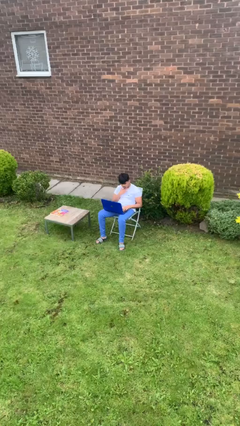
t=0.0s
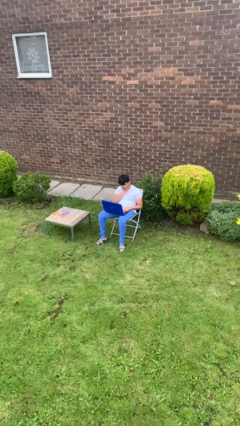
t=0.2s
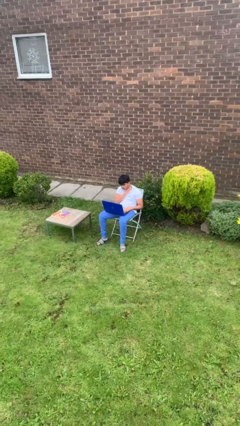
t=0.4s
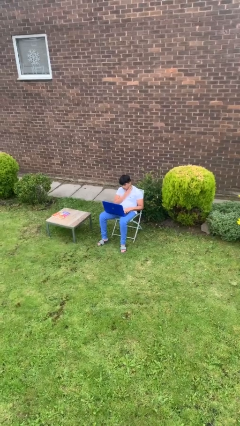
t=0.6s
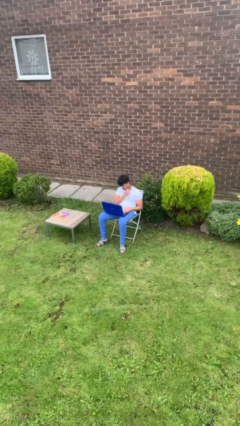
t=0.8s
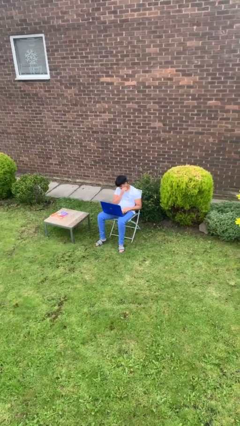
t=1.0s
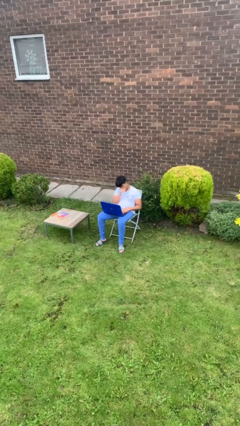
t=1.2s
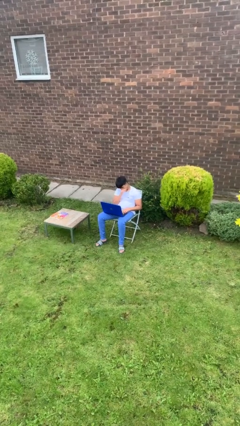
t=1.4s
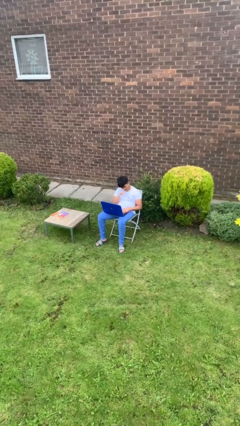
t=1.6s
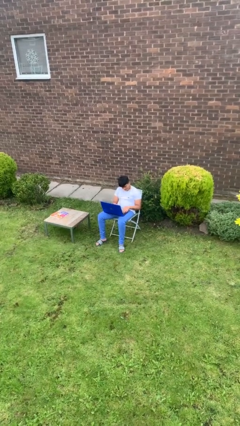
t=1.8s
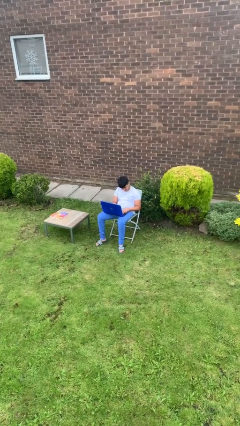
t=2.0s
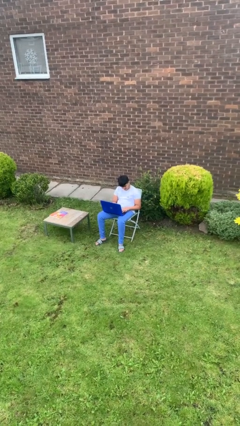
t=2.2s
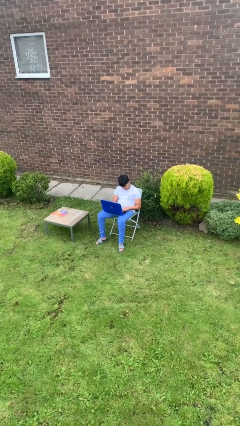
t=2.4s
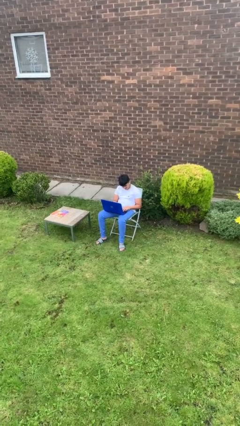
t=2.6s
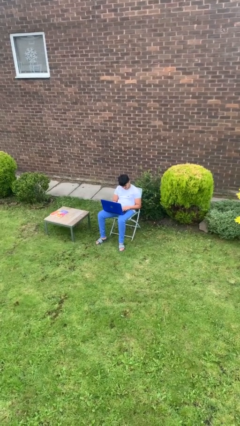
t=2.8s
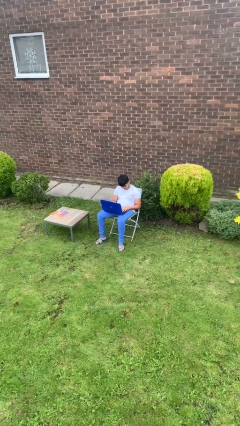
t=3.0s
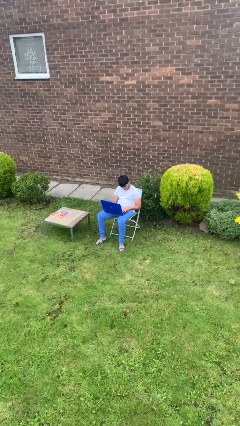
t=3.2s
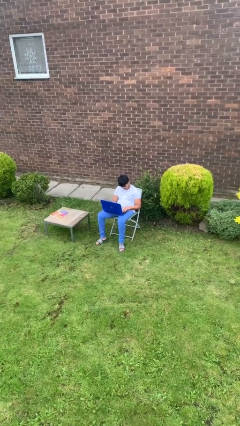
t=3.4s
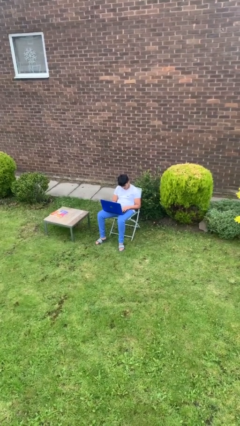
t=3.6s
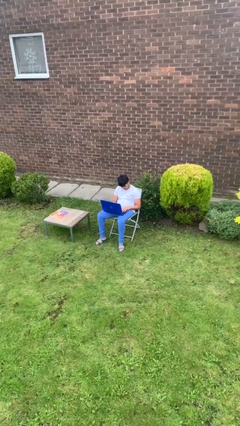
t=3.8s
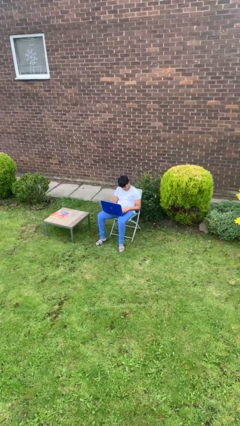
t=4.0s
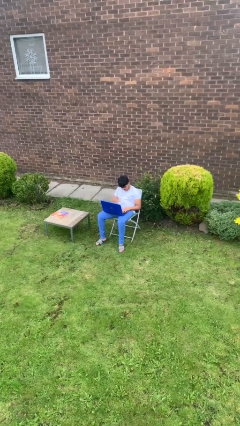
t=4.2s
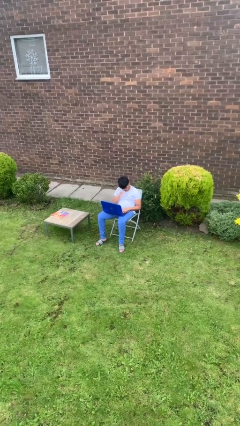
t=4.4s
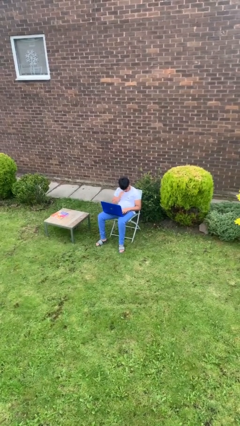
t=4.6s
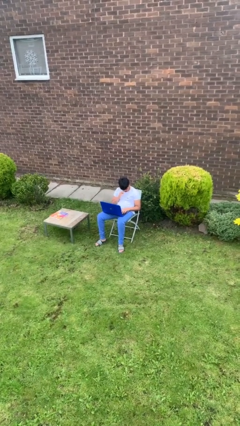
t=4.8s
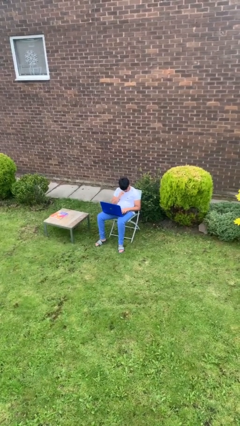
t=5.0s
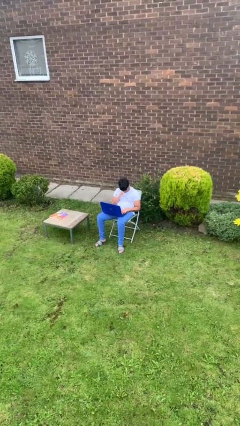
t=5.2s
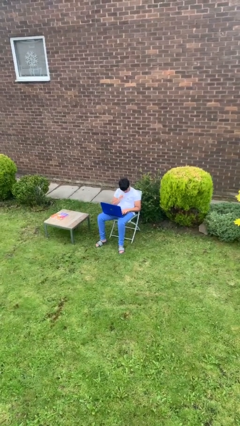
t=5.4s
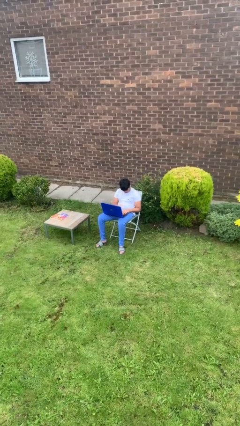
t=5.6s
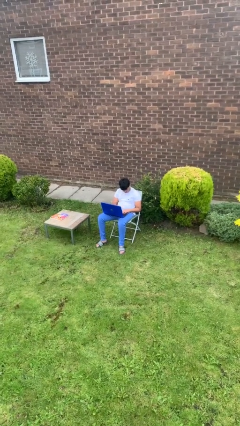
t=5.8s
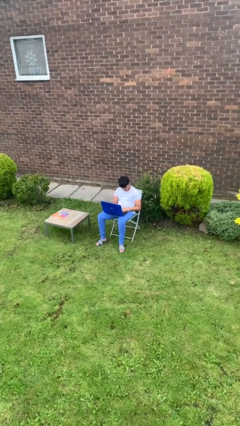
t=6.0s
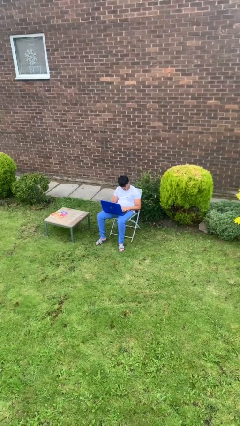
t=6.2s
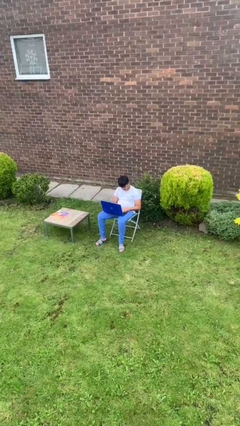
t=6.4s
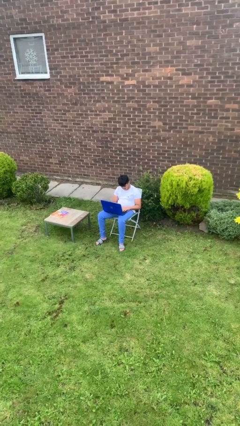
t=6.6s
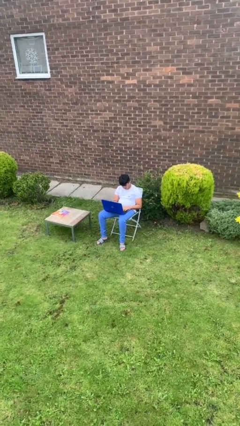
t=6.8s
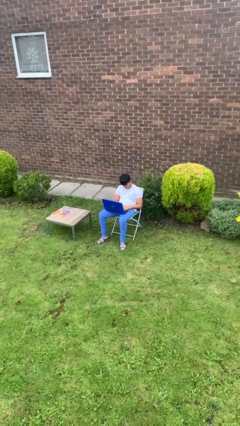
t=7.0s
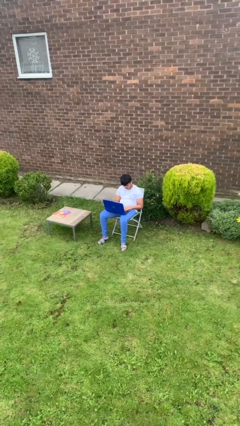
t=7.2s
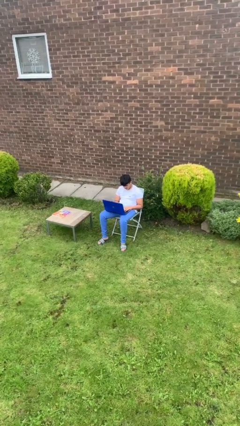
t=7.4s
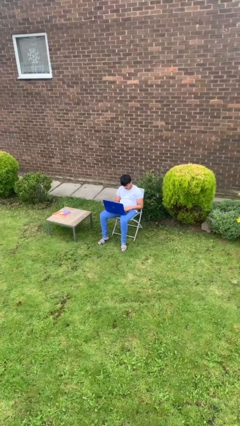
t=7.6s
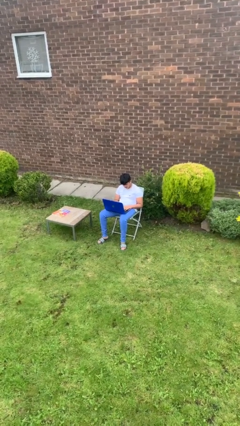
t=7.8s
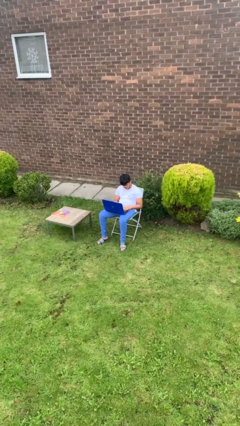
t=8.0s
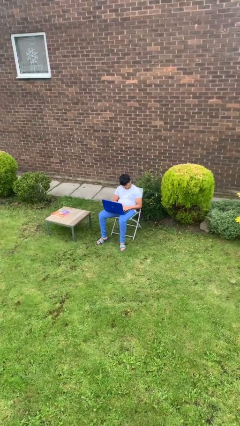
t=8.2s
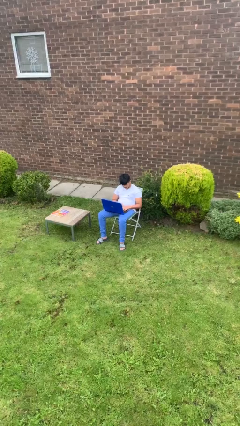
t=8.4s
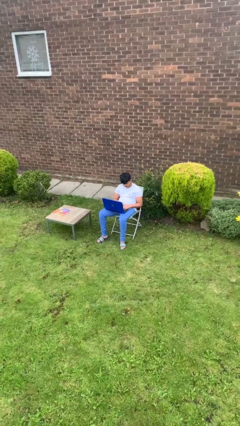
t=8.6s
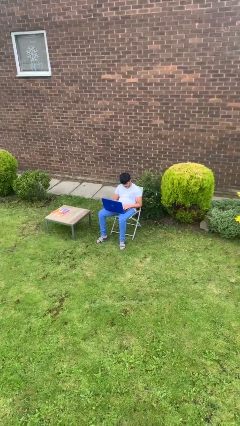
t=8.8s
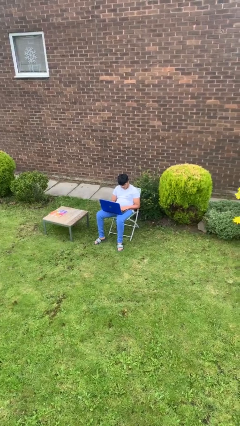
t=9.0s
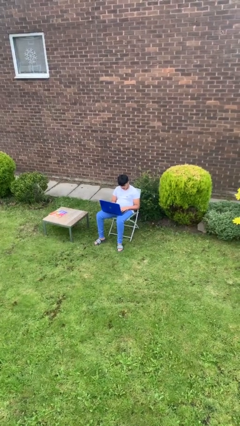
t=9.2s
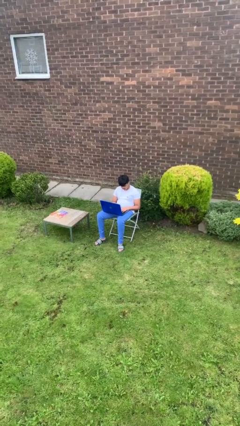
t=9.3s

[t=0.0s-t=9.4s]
person interacts with laptop

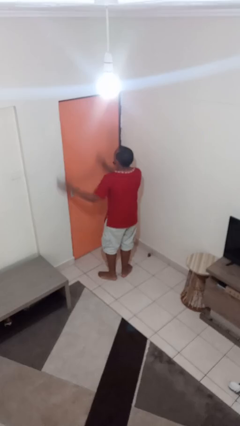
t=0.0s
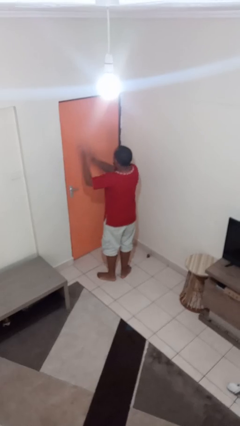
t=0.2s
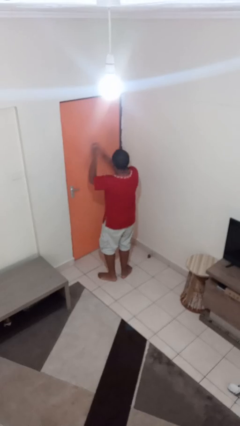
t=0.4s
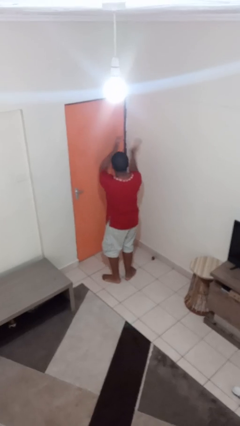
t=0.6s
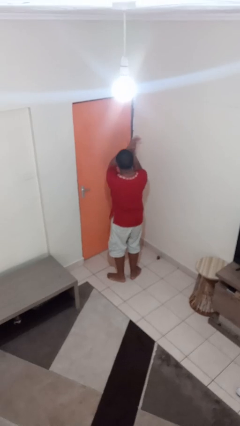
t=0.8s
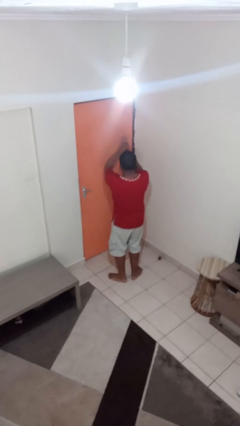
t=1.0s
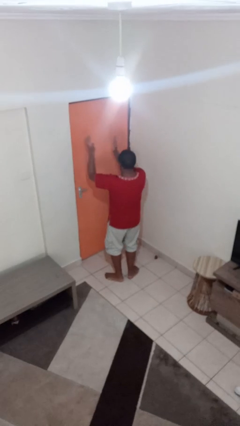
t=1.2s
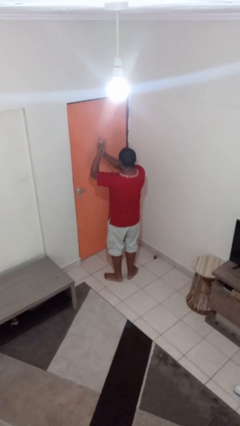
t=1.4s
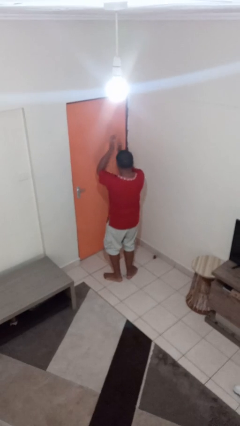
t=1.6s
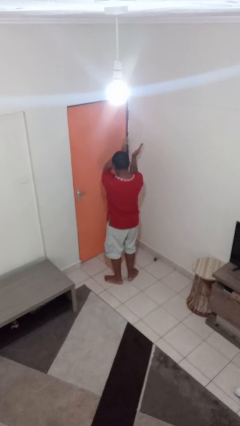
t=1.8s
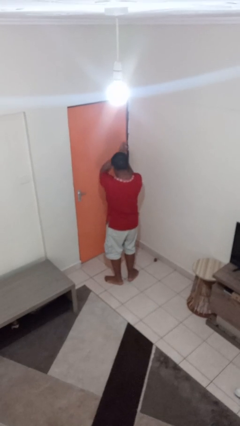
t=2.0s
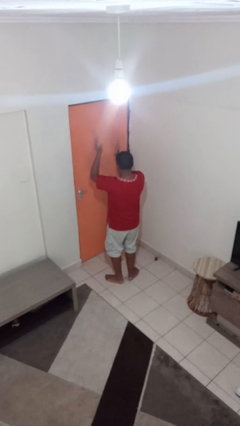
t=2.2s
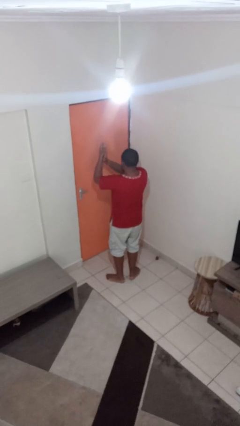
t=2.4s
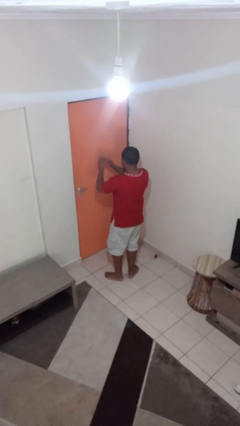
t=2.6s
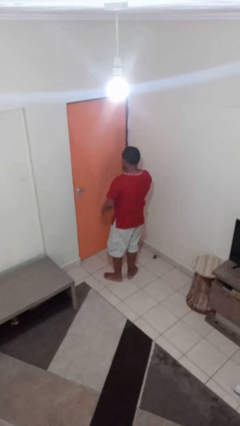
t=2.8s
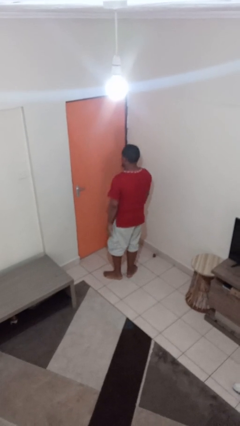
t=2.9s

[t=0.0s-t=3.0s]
person claps hands

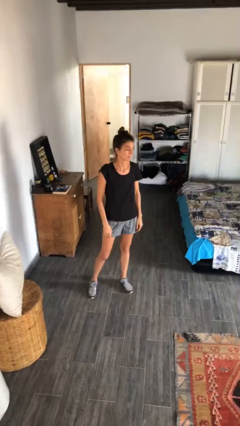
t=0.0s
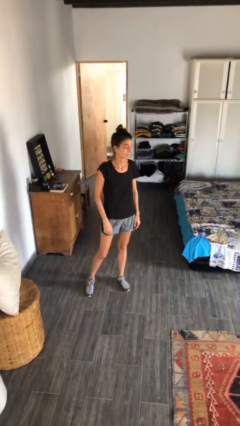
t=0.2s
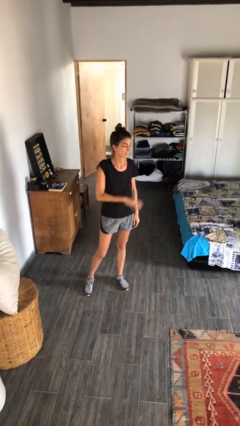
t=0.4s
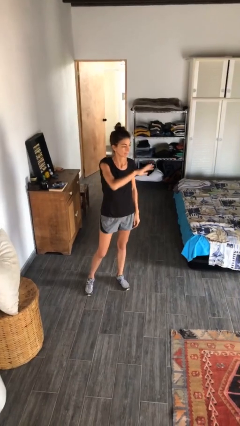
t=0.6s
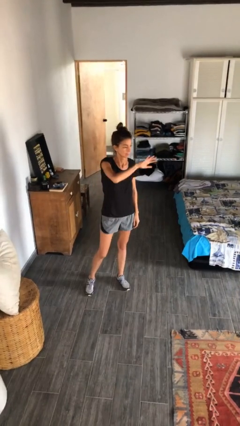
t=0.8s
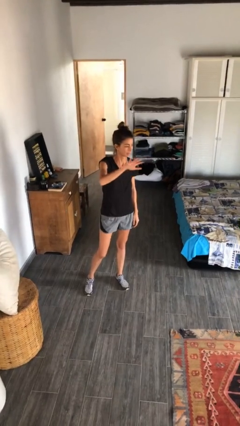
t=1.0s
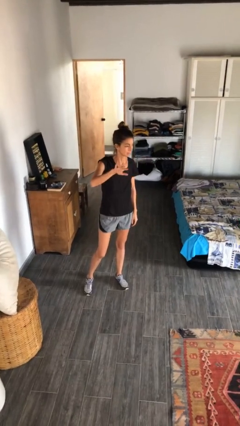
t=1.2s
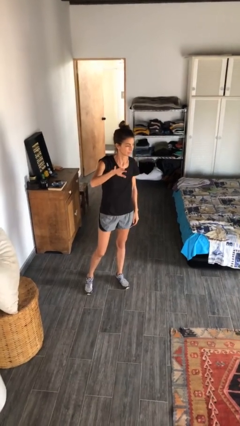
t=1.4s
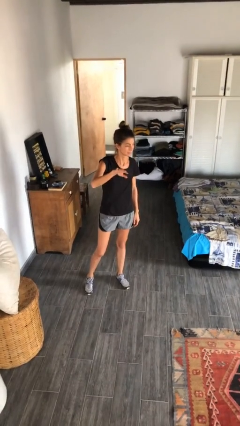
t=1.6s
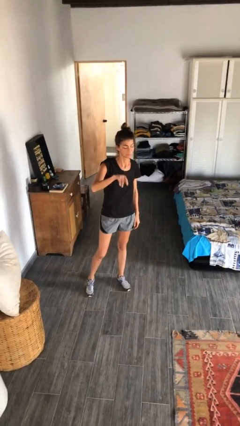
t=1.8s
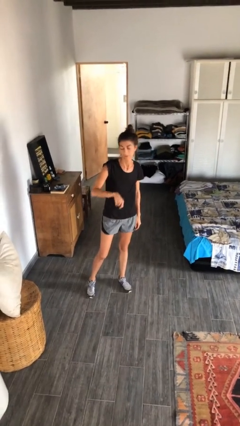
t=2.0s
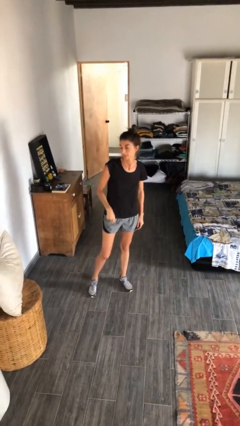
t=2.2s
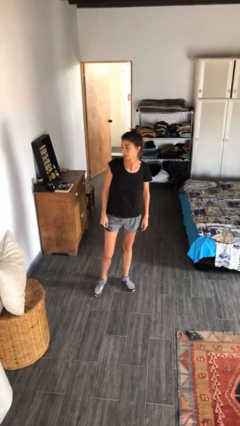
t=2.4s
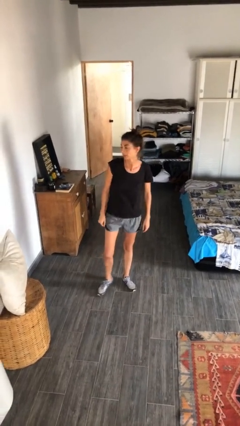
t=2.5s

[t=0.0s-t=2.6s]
person gestures swipe right

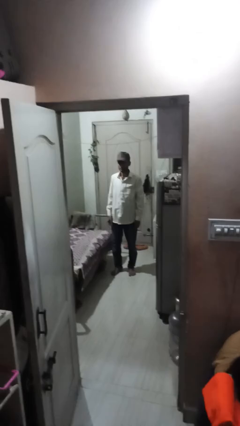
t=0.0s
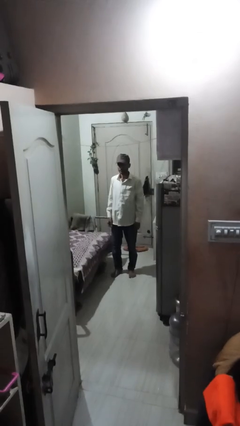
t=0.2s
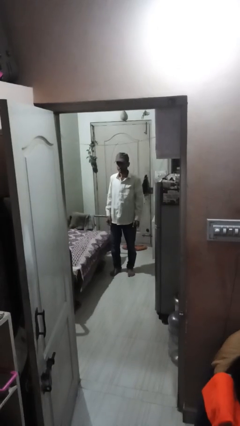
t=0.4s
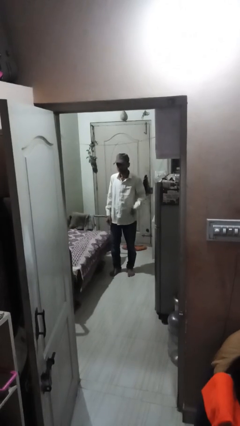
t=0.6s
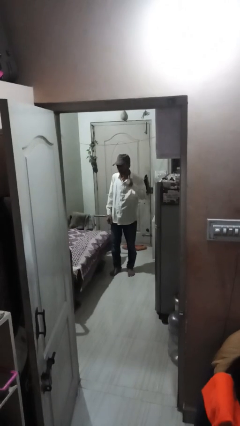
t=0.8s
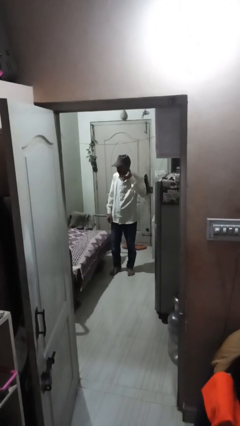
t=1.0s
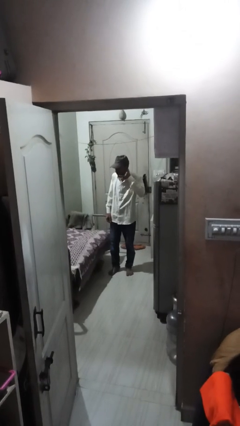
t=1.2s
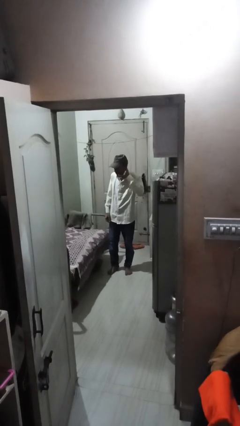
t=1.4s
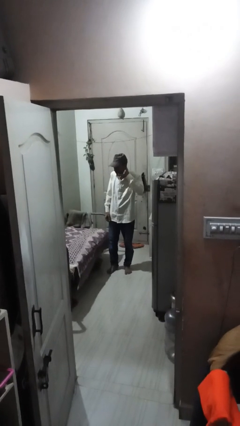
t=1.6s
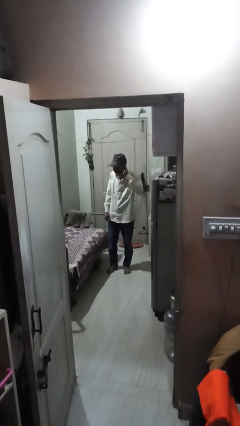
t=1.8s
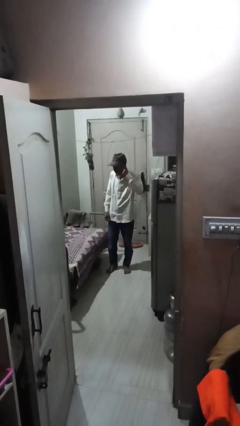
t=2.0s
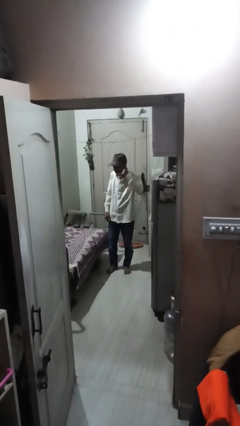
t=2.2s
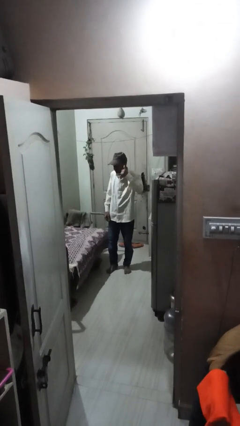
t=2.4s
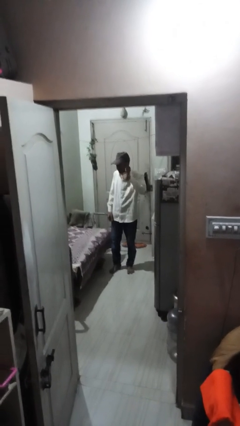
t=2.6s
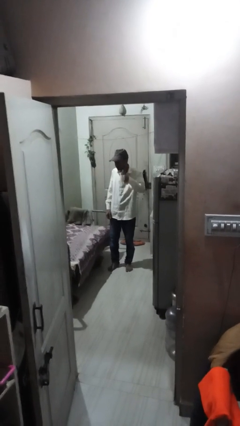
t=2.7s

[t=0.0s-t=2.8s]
person gestures call me
